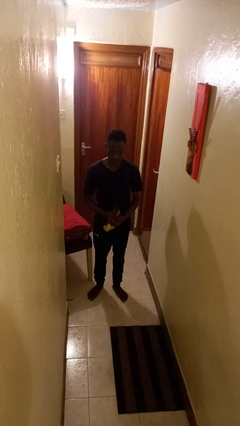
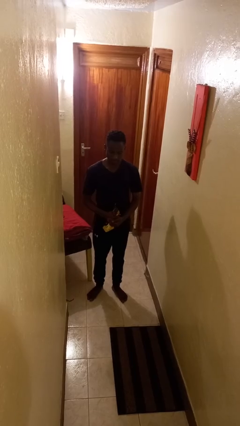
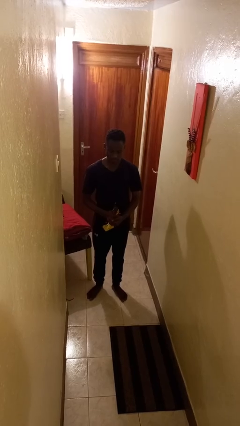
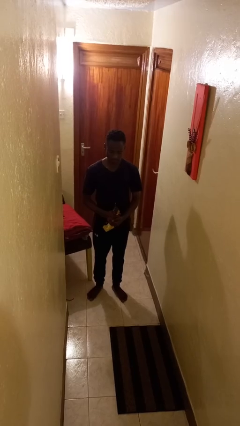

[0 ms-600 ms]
person eats snack from bag

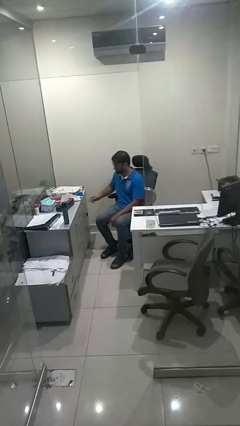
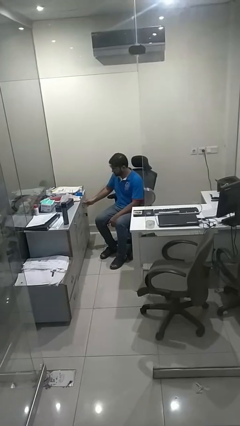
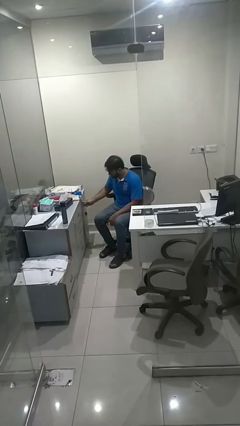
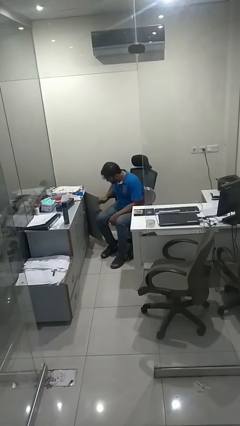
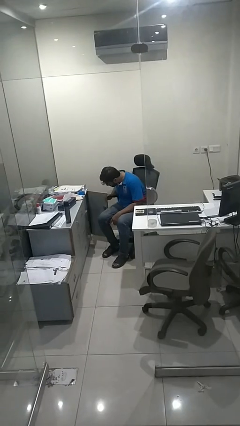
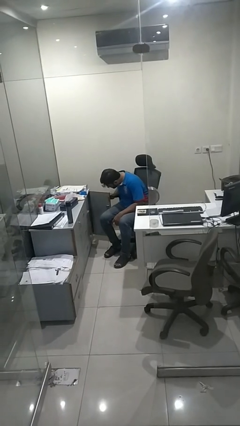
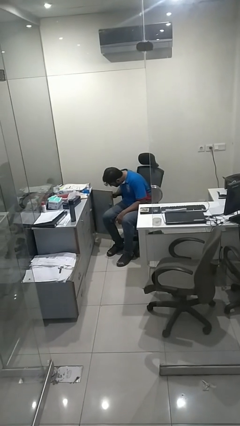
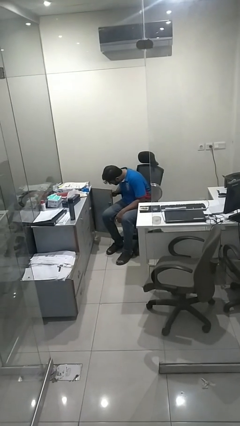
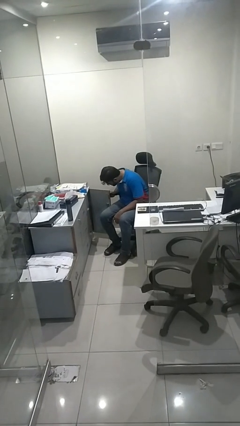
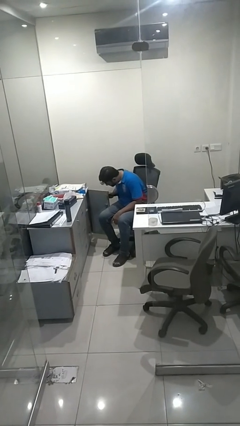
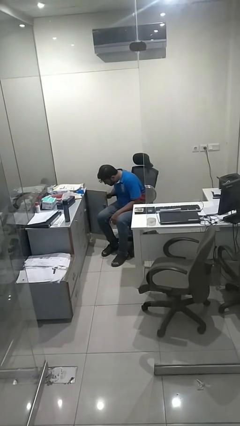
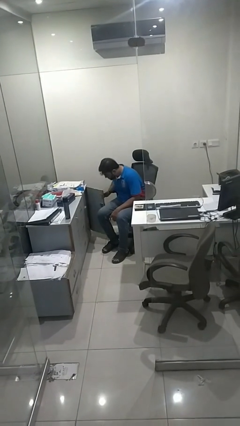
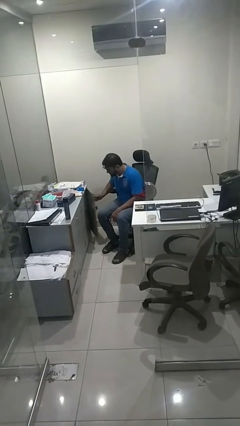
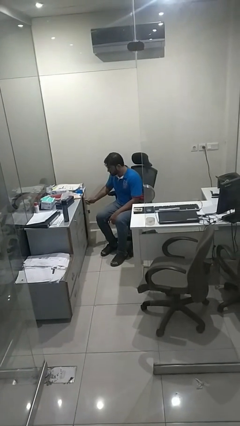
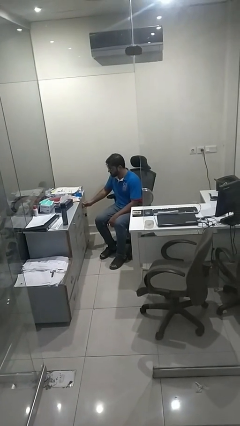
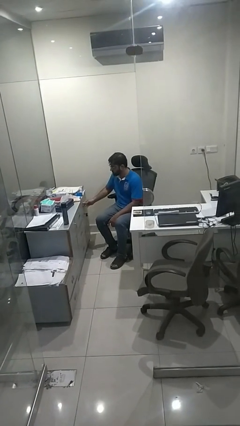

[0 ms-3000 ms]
person searches in cabinet

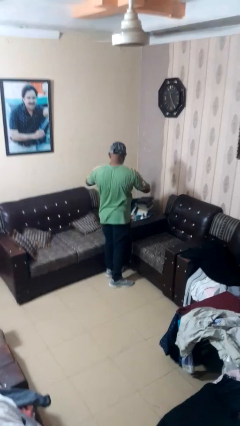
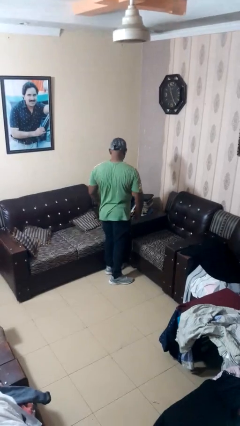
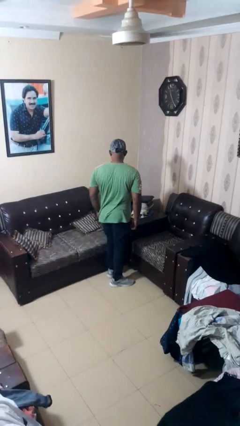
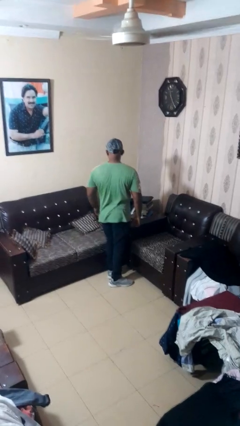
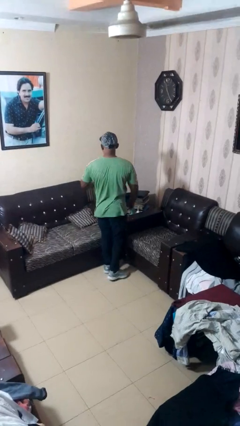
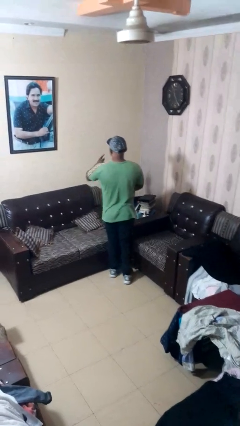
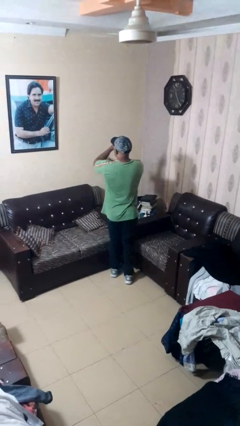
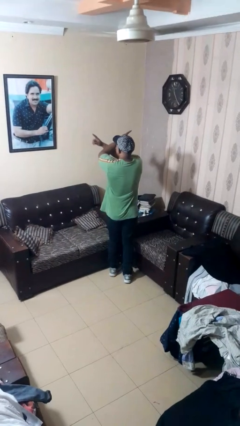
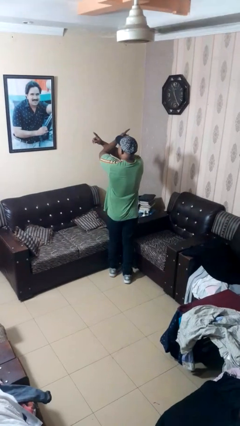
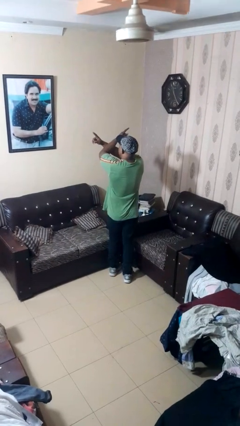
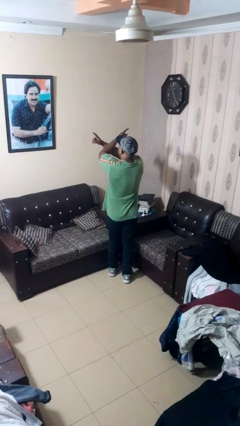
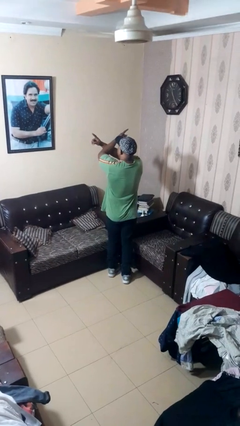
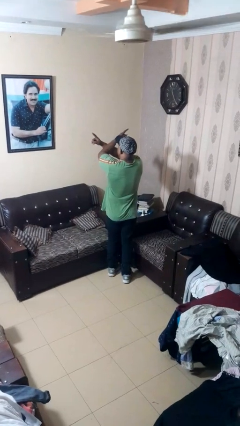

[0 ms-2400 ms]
person gestures arms x

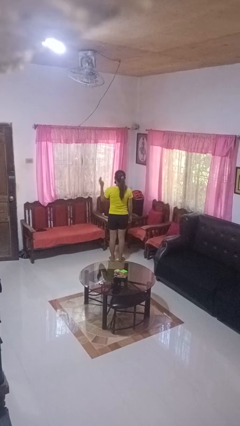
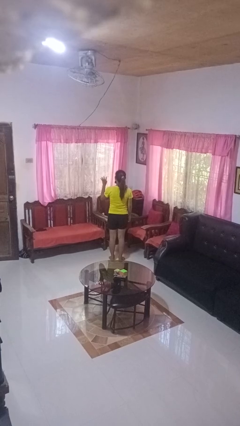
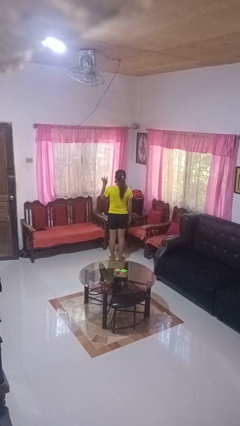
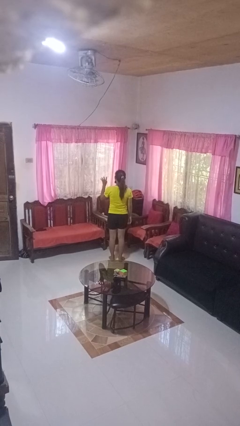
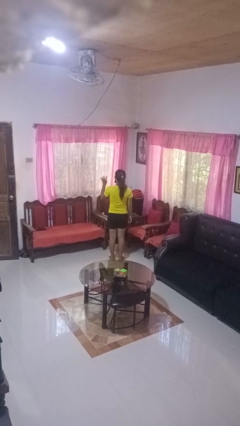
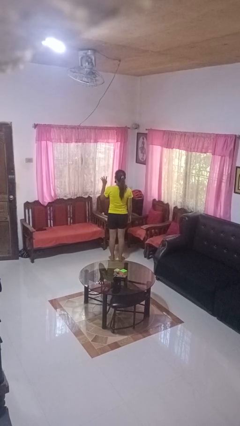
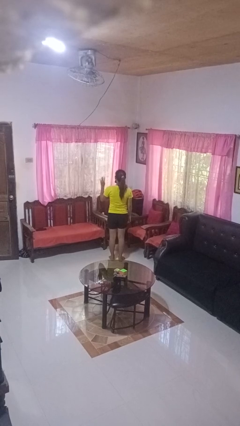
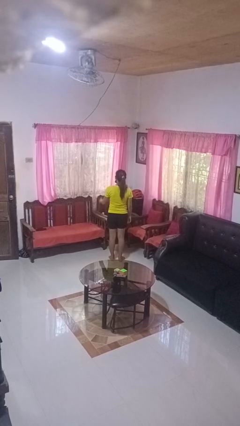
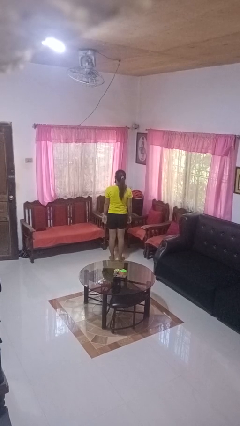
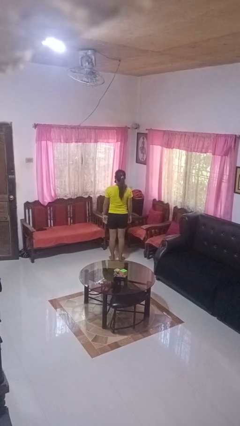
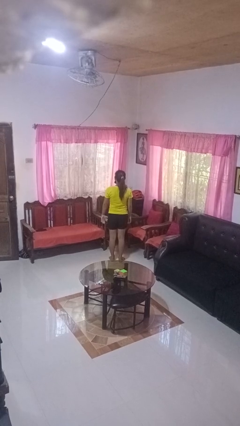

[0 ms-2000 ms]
person gestures number four

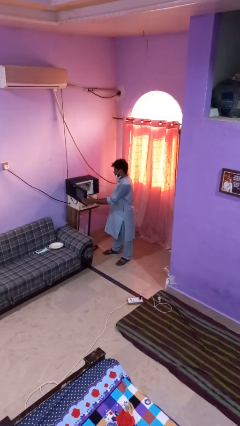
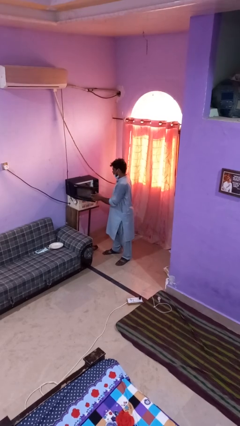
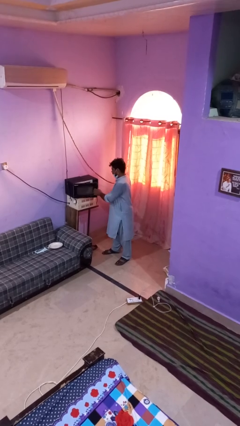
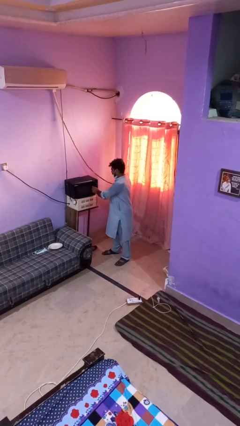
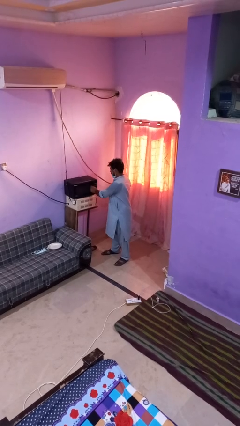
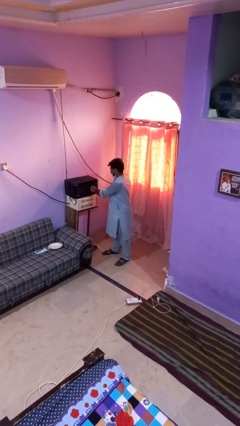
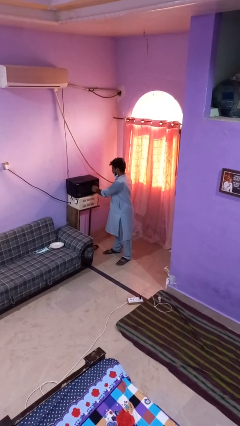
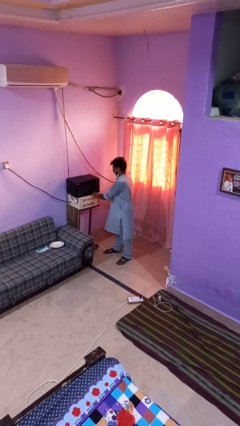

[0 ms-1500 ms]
person closes oven door

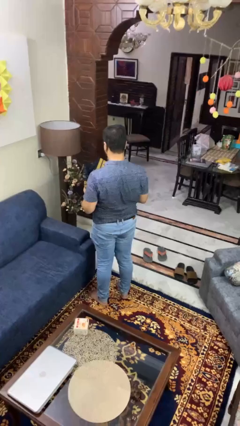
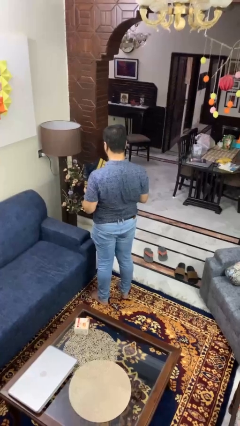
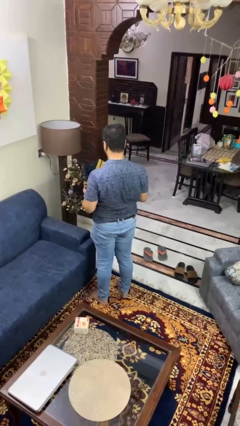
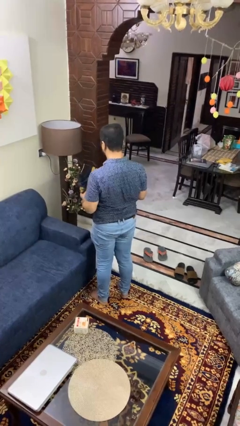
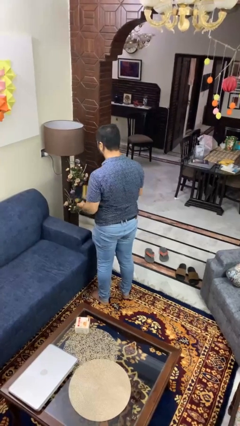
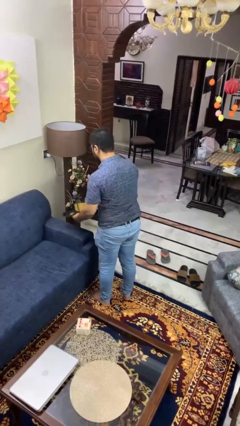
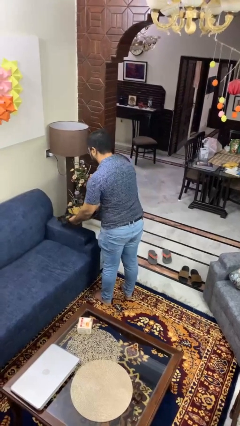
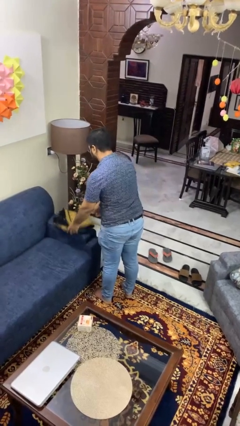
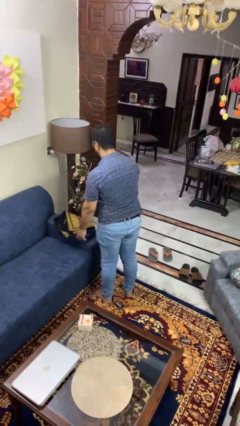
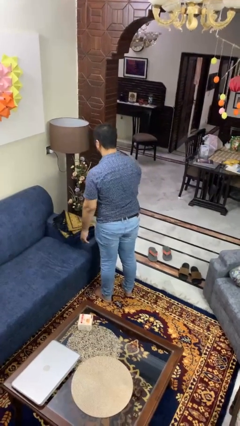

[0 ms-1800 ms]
person puts down object on couch

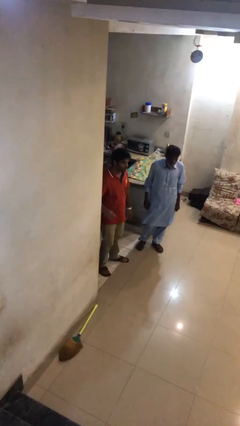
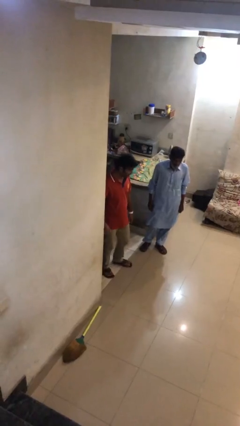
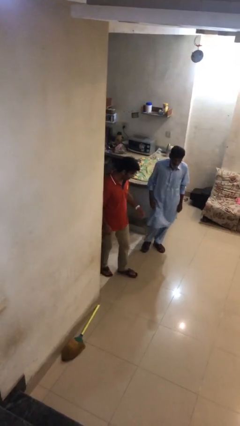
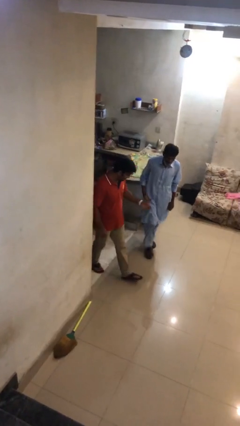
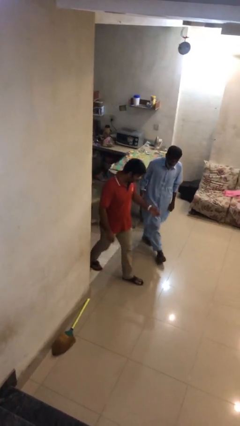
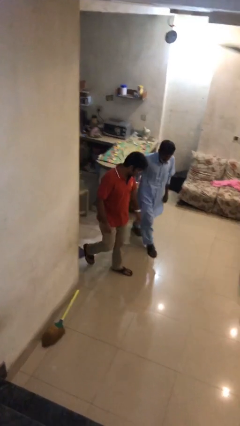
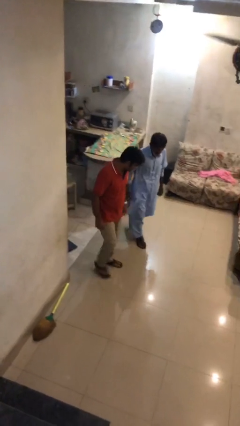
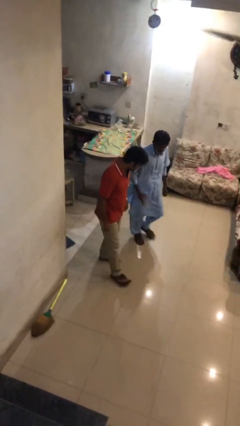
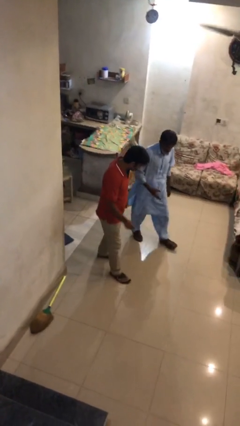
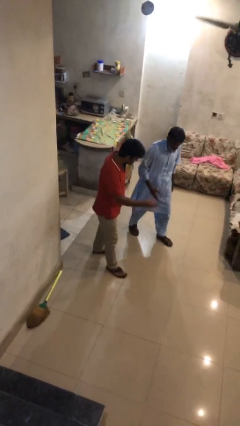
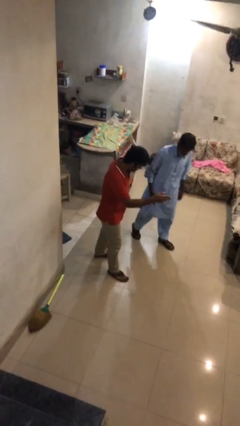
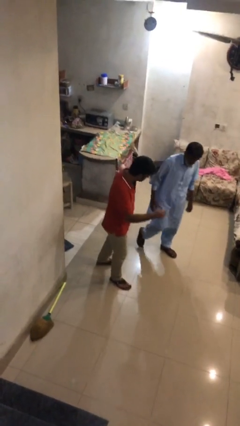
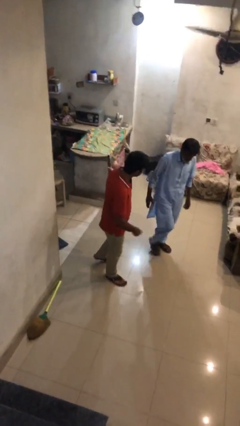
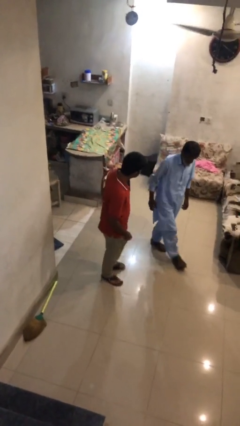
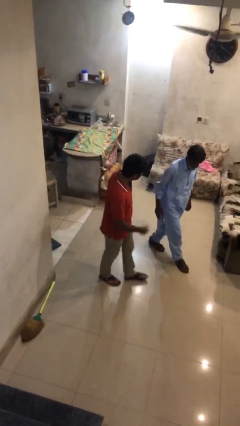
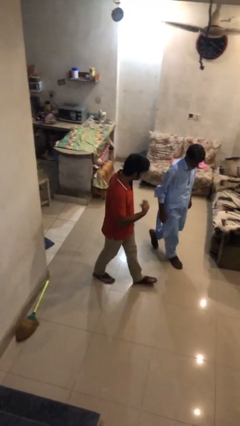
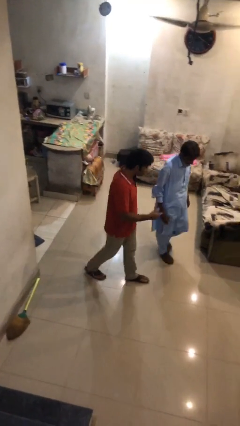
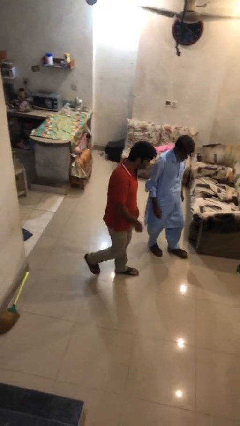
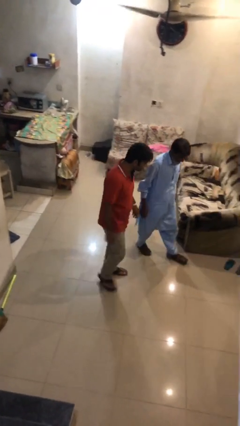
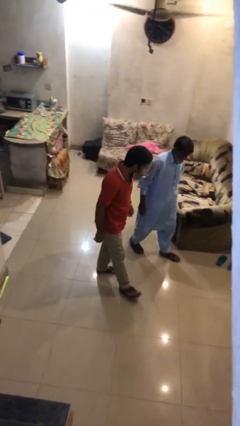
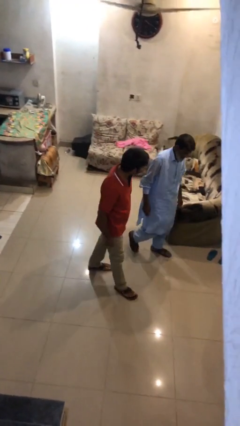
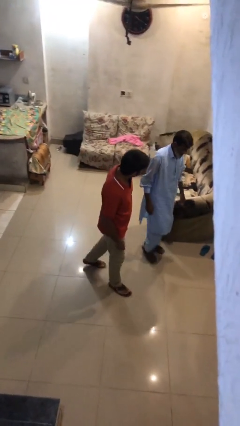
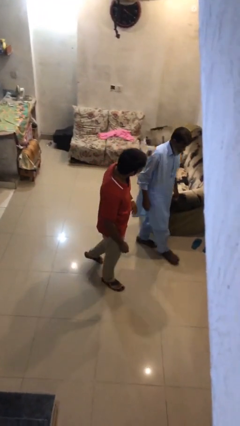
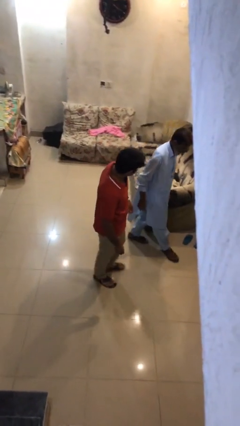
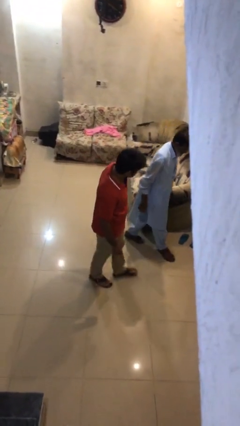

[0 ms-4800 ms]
person talks to person
